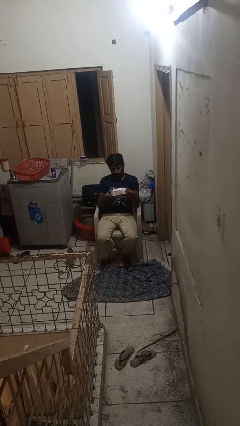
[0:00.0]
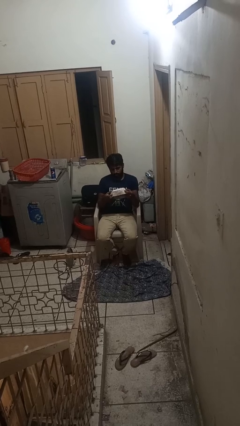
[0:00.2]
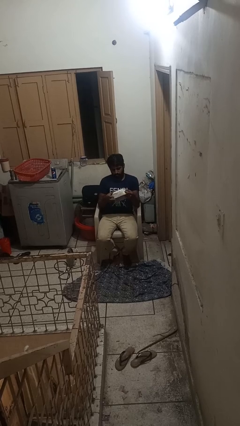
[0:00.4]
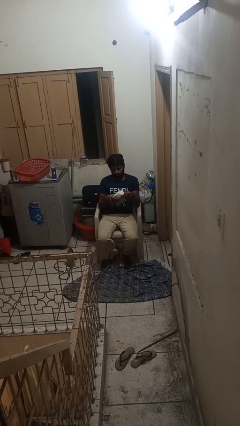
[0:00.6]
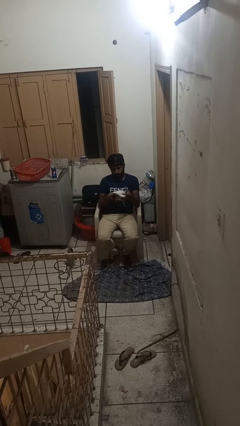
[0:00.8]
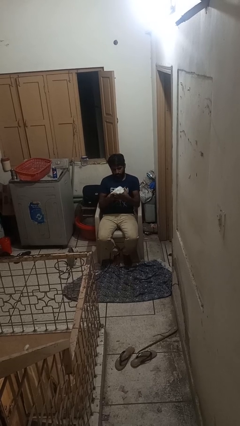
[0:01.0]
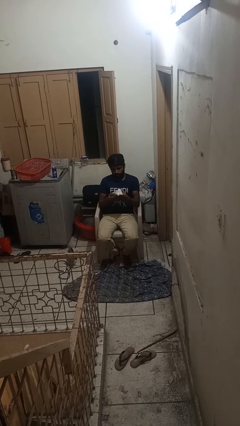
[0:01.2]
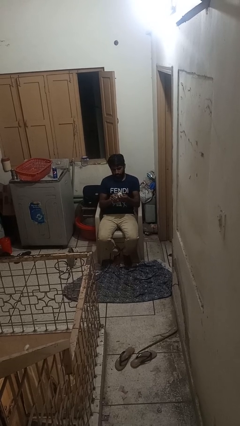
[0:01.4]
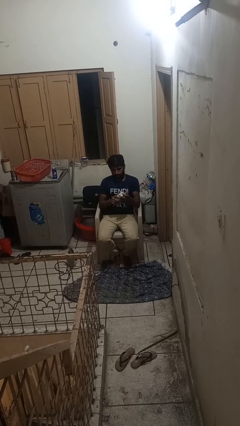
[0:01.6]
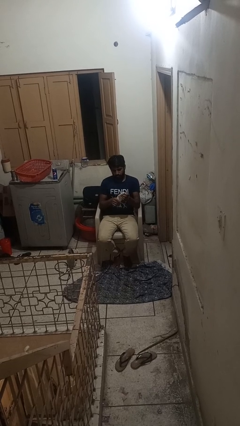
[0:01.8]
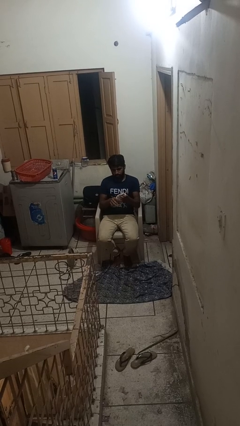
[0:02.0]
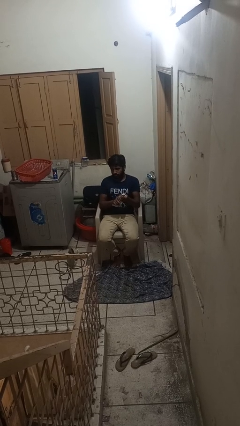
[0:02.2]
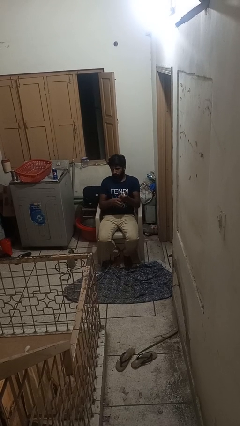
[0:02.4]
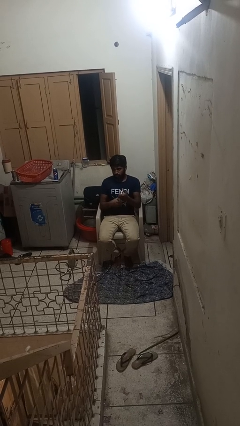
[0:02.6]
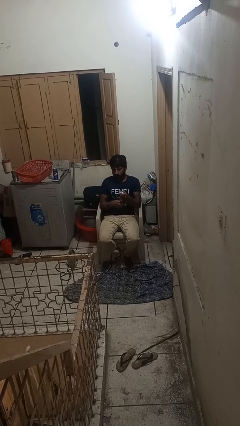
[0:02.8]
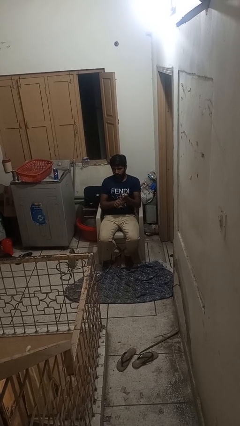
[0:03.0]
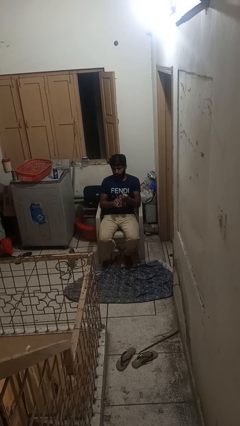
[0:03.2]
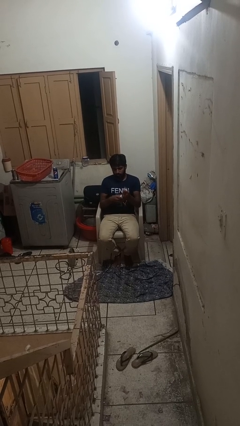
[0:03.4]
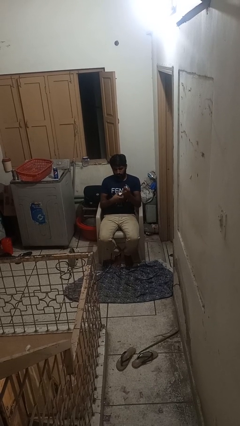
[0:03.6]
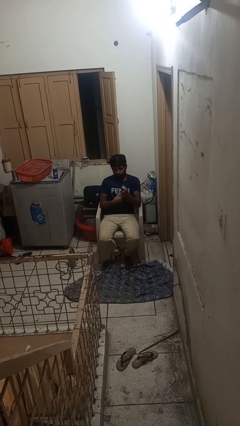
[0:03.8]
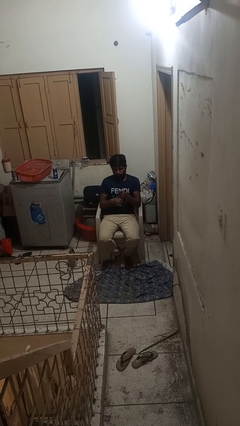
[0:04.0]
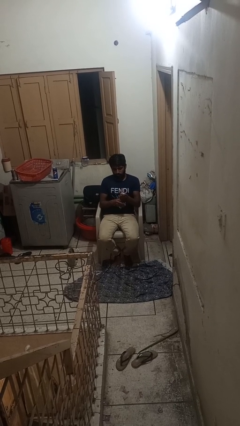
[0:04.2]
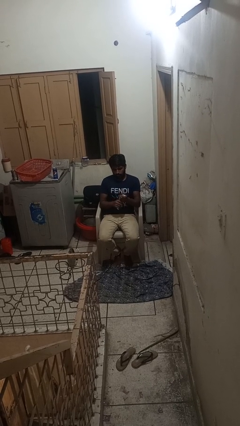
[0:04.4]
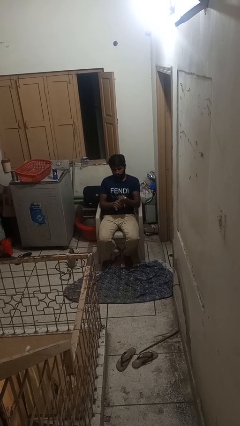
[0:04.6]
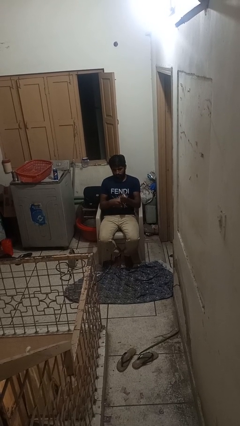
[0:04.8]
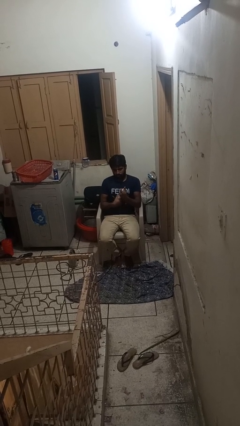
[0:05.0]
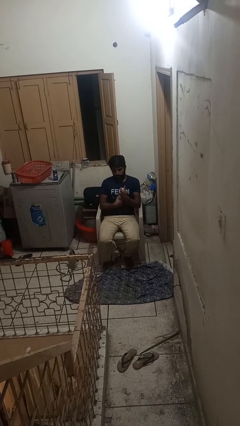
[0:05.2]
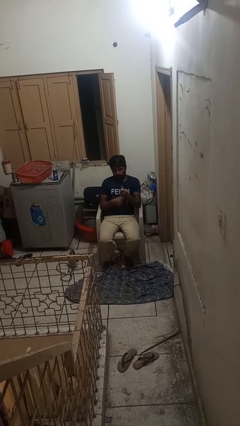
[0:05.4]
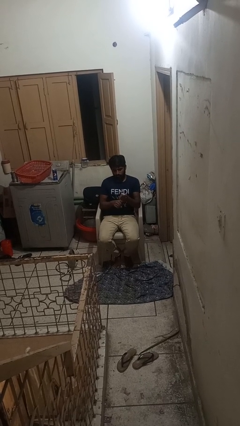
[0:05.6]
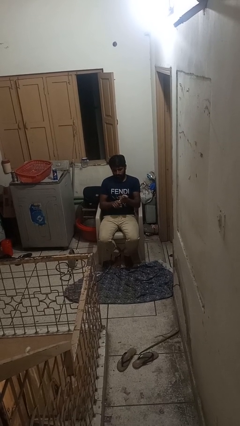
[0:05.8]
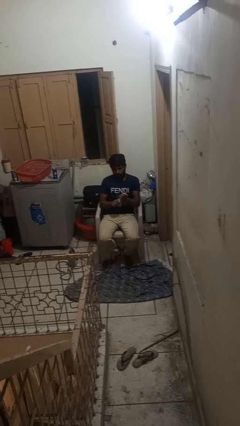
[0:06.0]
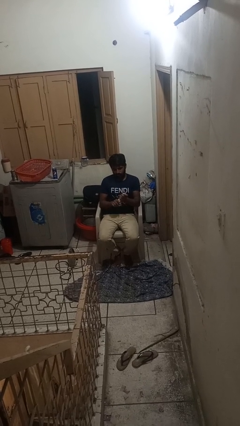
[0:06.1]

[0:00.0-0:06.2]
person squeezes object

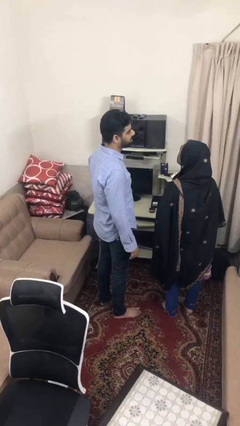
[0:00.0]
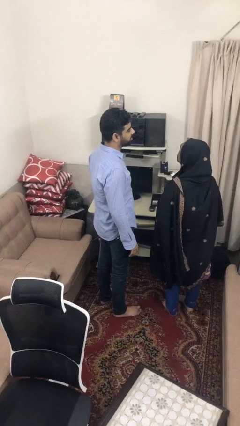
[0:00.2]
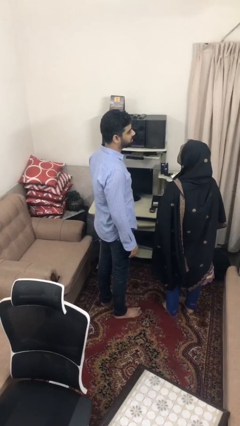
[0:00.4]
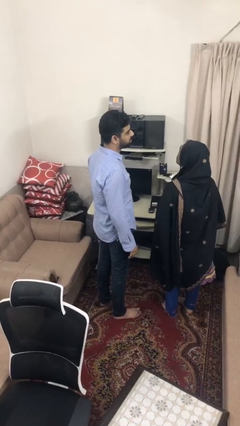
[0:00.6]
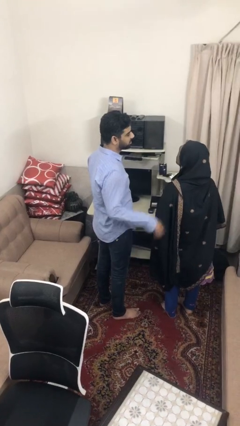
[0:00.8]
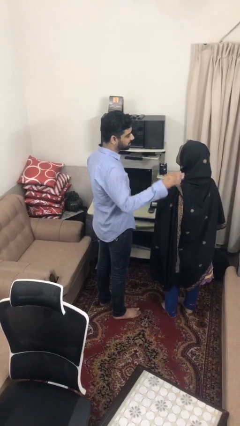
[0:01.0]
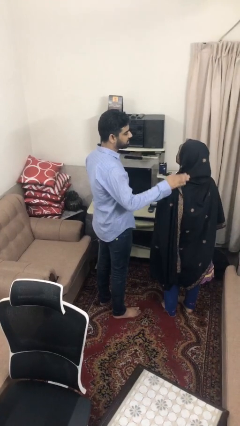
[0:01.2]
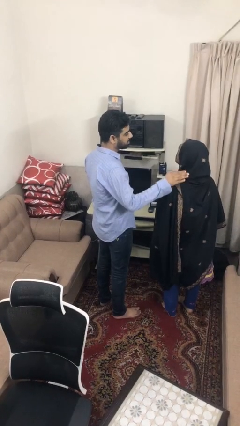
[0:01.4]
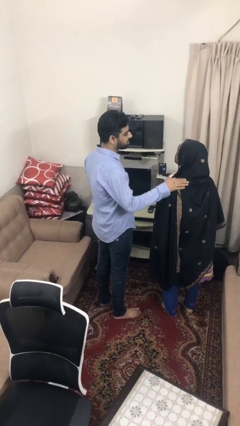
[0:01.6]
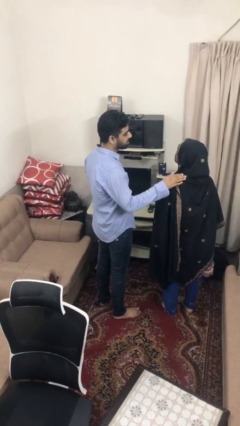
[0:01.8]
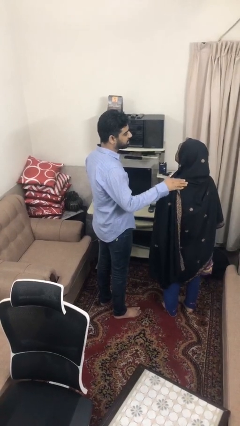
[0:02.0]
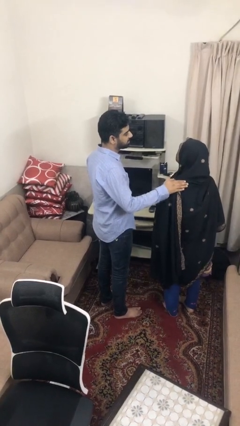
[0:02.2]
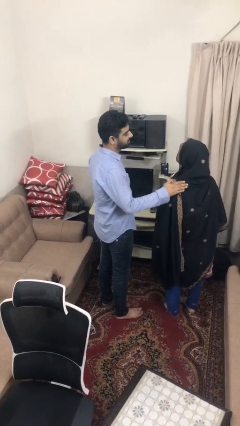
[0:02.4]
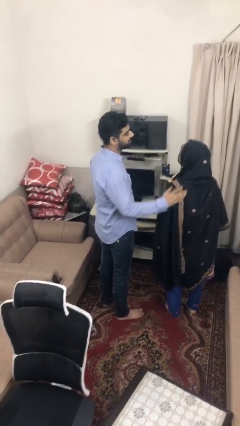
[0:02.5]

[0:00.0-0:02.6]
person pounds shoulders of person

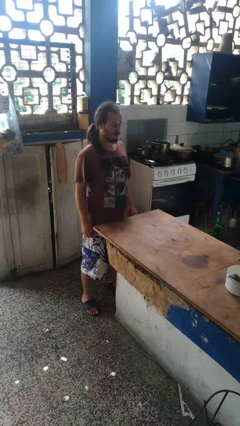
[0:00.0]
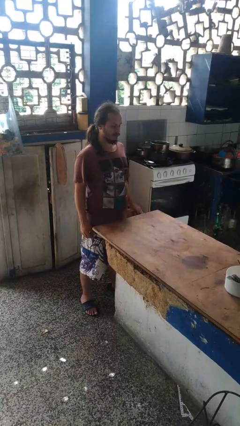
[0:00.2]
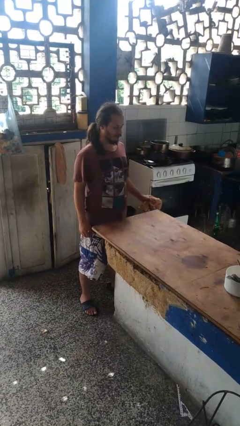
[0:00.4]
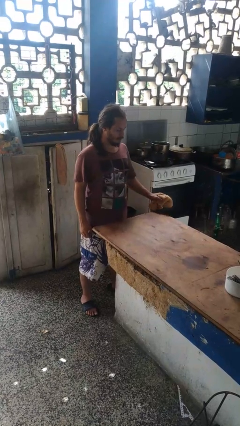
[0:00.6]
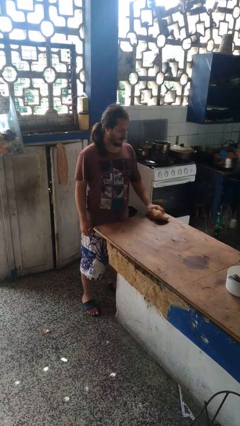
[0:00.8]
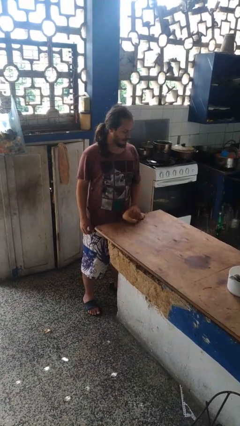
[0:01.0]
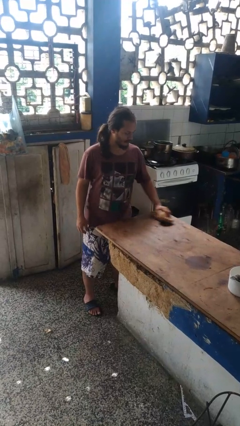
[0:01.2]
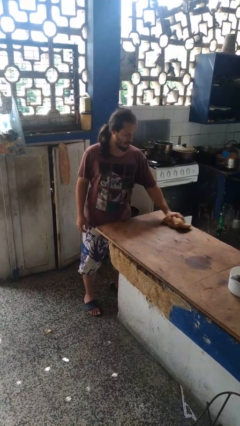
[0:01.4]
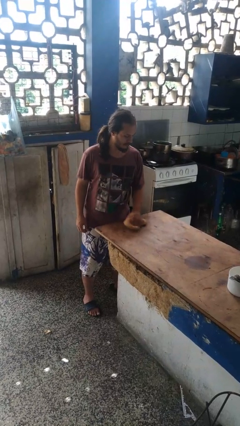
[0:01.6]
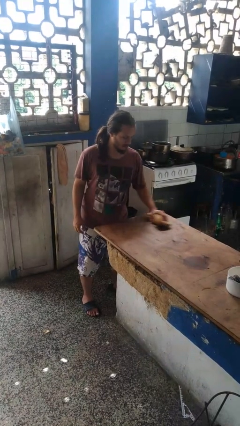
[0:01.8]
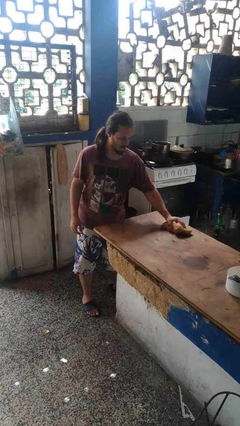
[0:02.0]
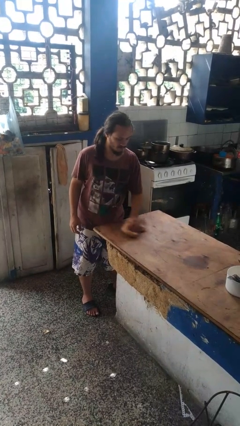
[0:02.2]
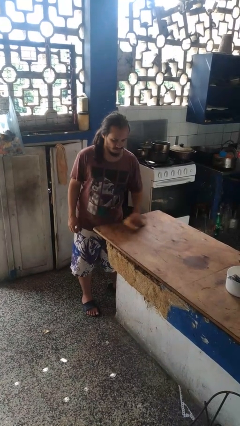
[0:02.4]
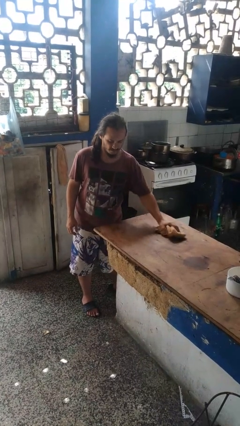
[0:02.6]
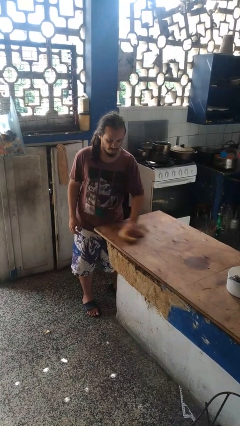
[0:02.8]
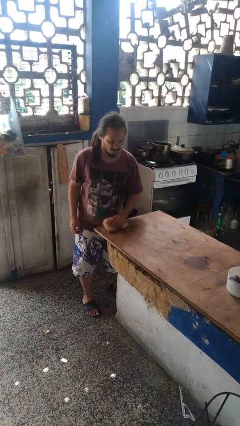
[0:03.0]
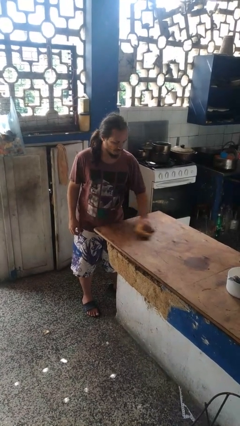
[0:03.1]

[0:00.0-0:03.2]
person cleans table with rag

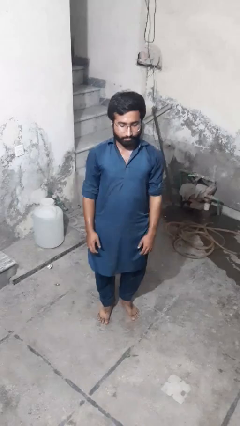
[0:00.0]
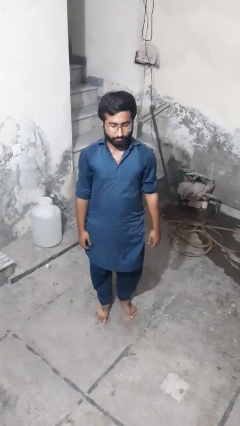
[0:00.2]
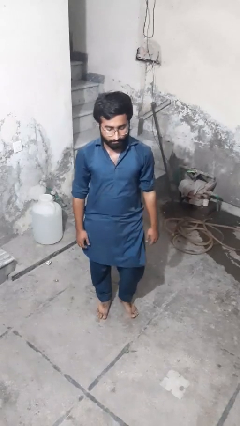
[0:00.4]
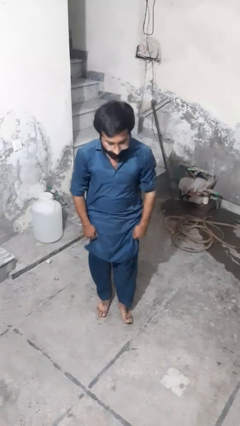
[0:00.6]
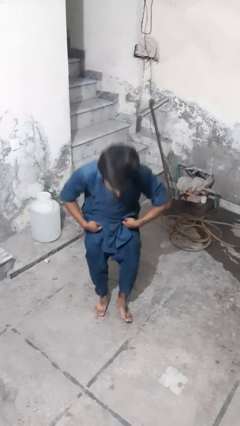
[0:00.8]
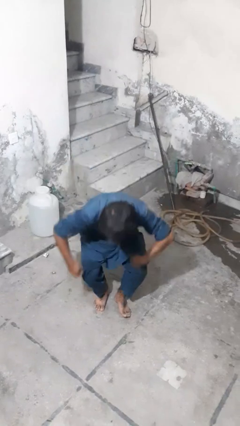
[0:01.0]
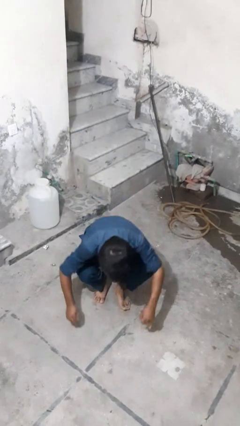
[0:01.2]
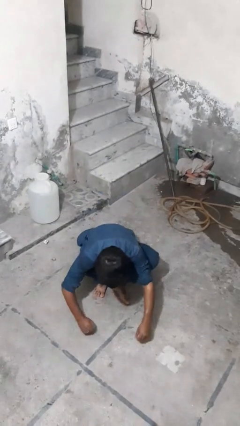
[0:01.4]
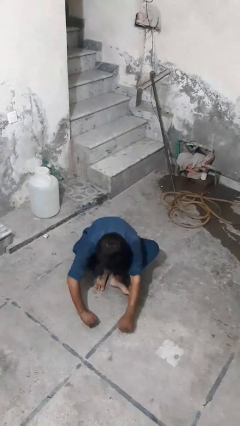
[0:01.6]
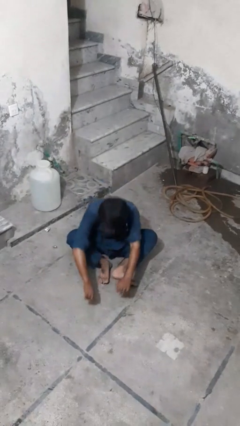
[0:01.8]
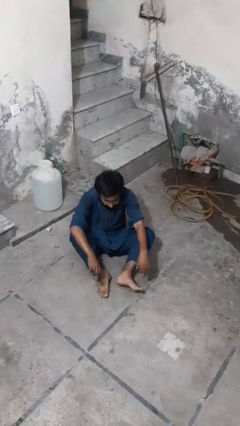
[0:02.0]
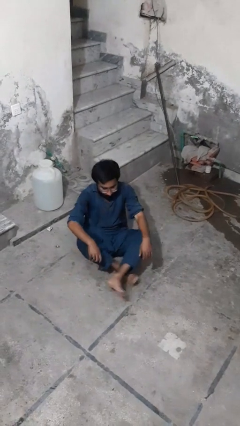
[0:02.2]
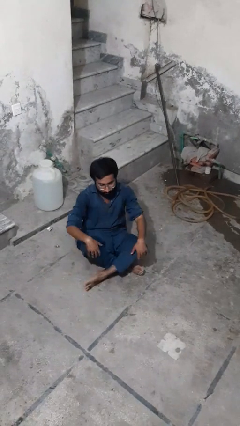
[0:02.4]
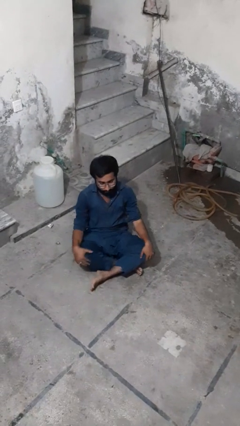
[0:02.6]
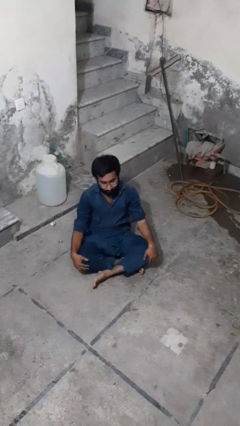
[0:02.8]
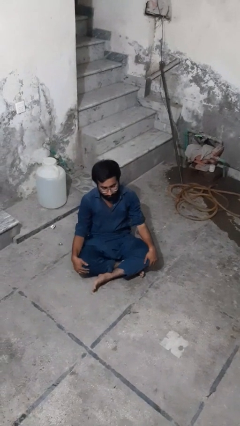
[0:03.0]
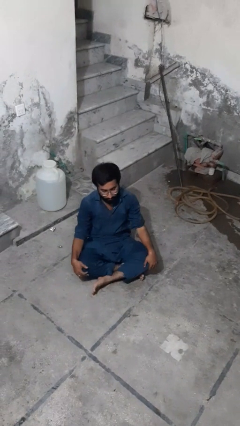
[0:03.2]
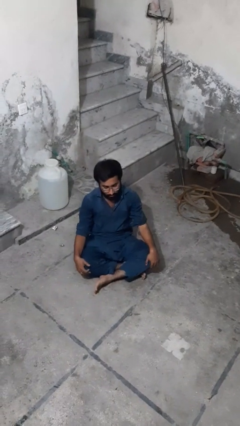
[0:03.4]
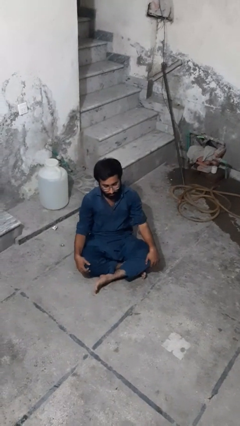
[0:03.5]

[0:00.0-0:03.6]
person sits crisscross

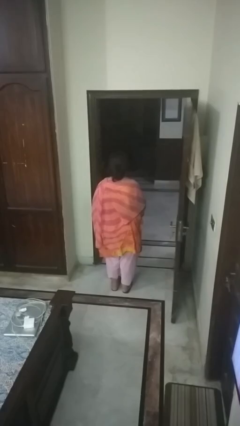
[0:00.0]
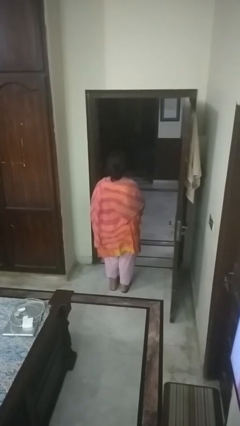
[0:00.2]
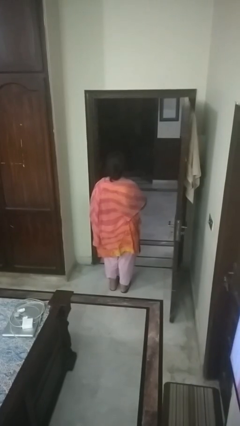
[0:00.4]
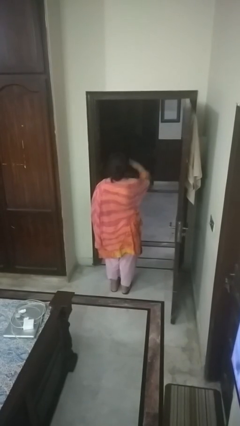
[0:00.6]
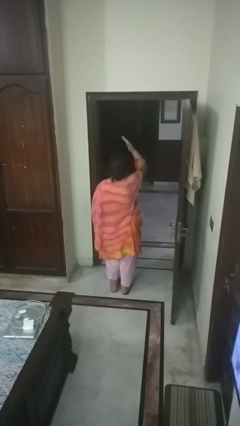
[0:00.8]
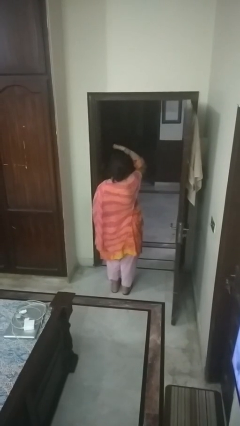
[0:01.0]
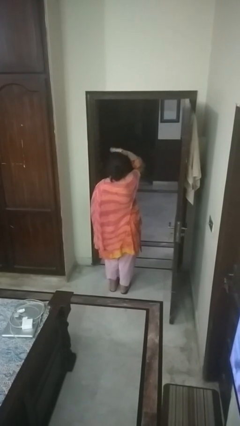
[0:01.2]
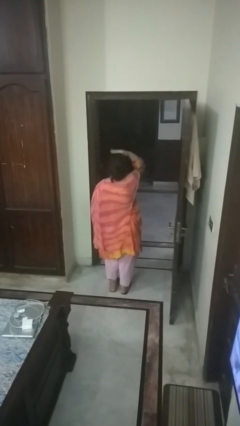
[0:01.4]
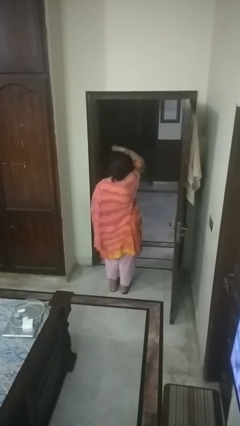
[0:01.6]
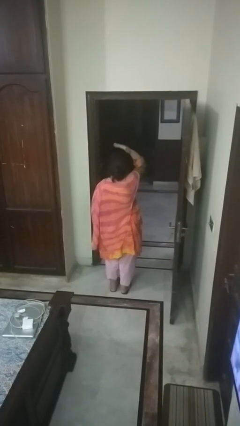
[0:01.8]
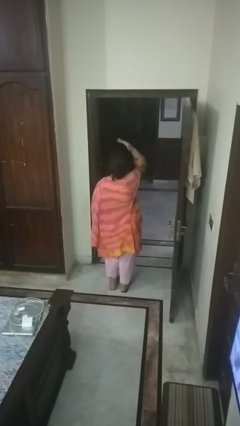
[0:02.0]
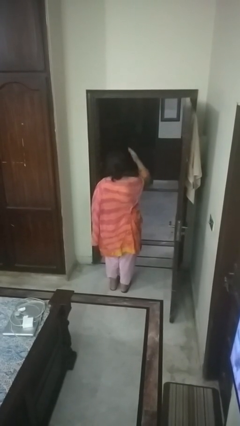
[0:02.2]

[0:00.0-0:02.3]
person pats head
